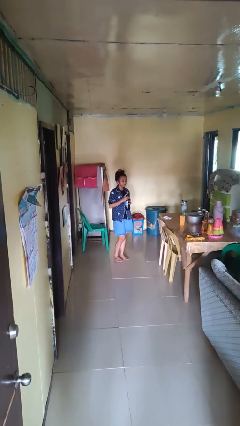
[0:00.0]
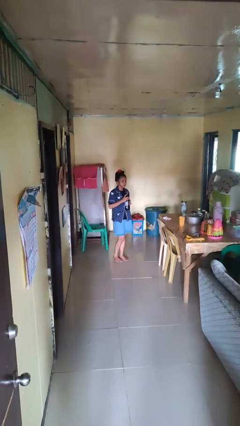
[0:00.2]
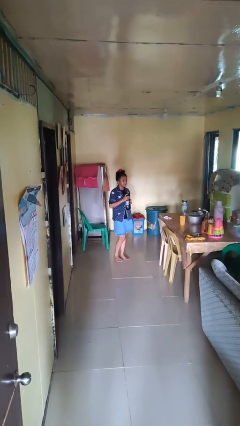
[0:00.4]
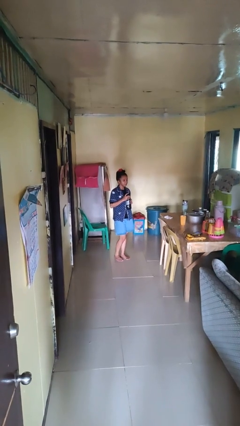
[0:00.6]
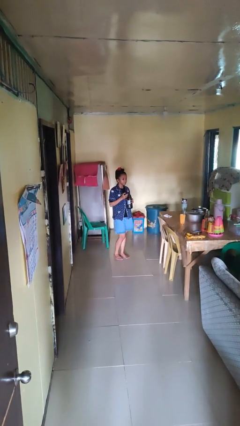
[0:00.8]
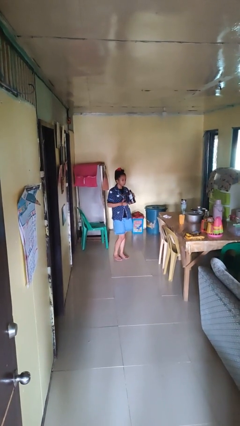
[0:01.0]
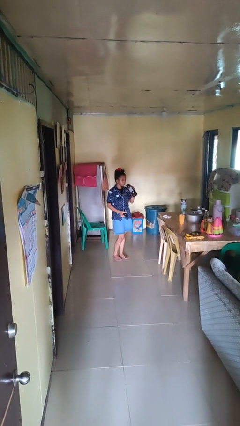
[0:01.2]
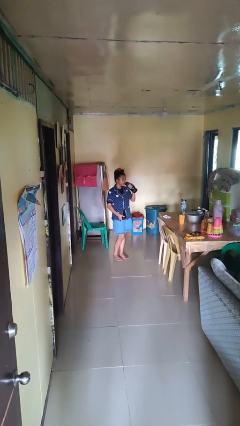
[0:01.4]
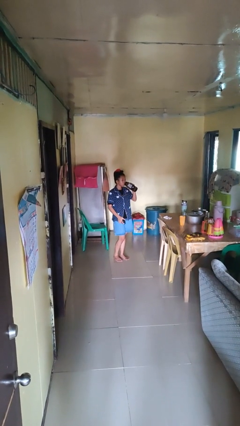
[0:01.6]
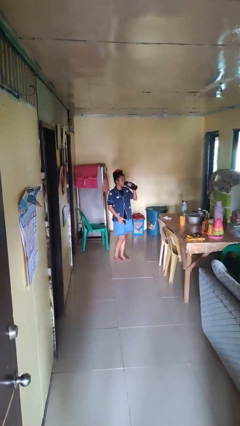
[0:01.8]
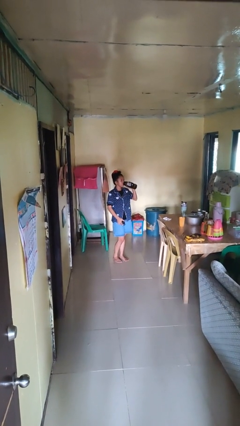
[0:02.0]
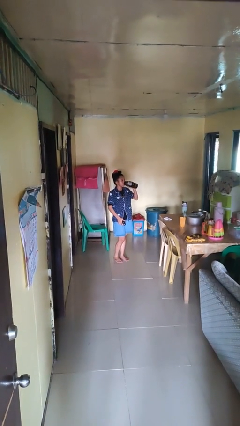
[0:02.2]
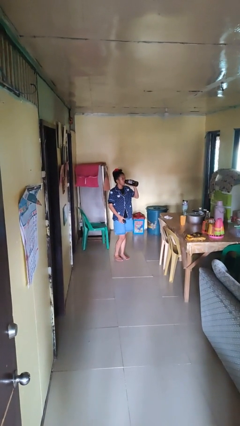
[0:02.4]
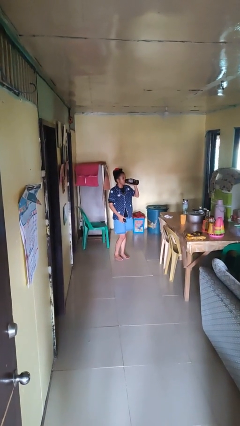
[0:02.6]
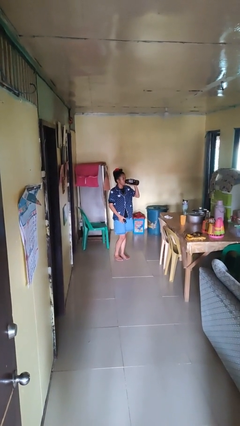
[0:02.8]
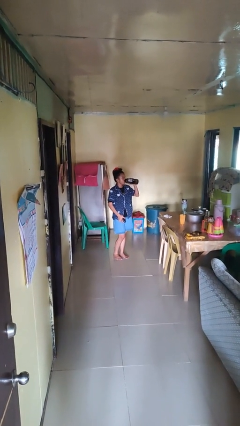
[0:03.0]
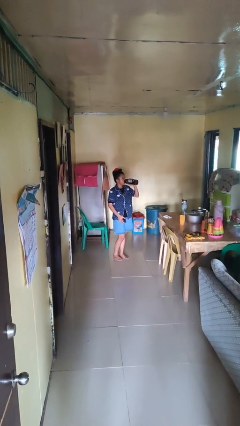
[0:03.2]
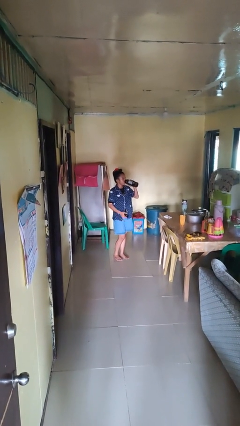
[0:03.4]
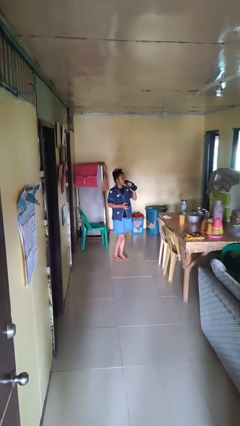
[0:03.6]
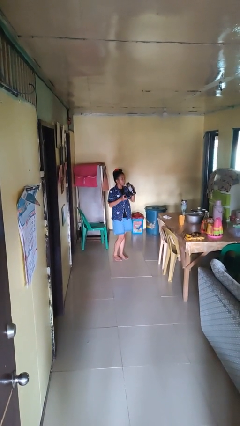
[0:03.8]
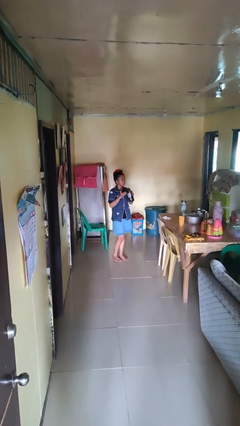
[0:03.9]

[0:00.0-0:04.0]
person drinks from bottle

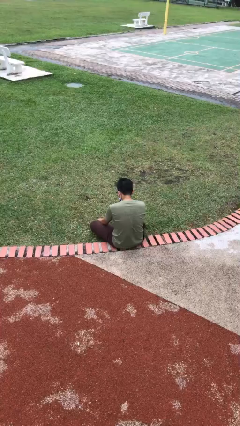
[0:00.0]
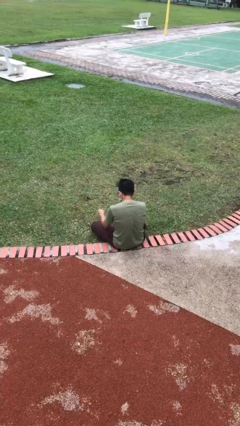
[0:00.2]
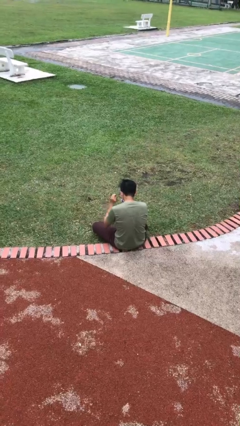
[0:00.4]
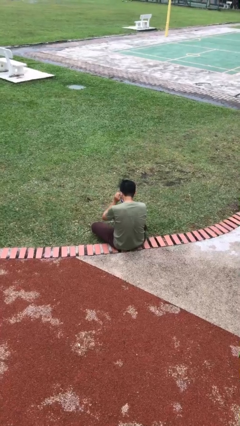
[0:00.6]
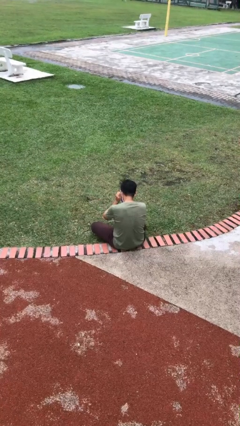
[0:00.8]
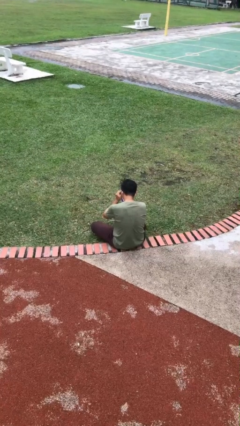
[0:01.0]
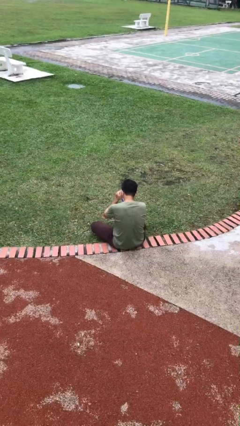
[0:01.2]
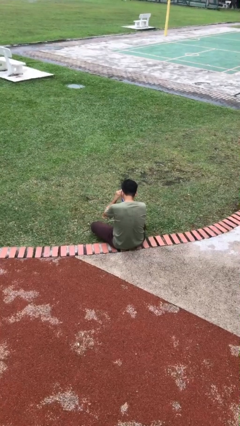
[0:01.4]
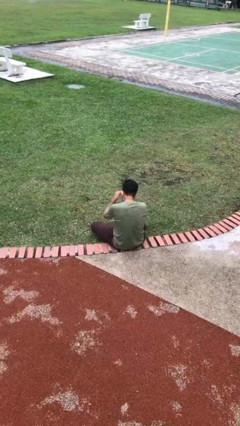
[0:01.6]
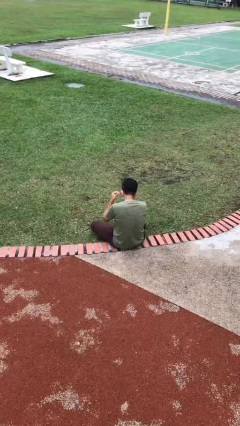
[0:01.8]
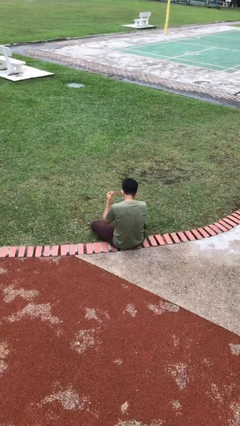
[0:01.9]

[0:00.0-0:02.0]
person touches earlobe

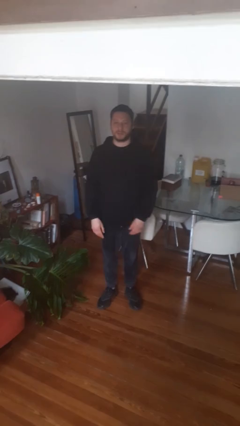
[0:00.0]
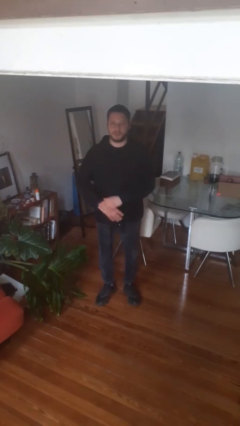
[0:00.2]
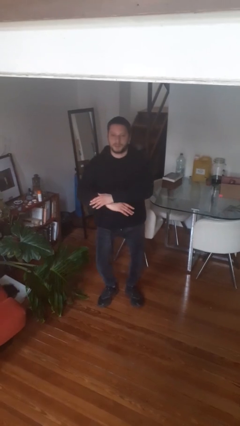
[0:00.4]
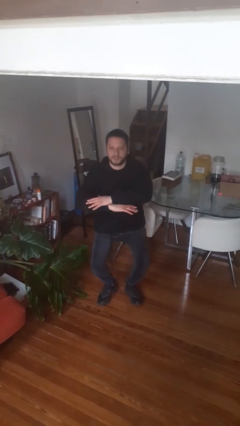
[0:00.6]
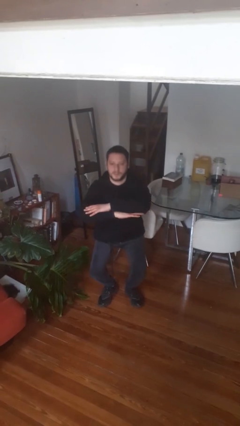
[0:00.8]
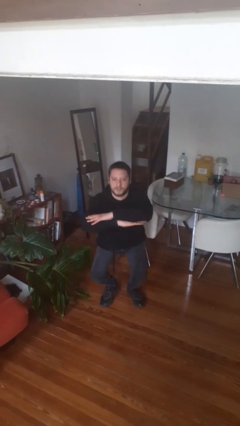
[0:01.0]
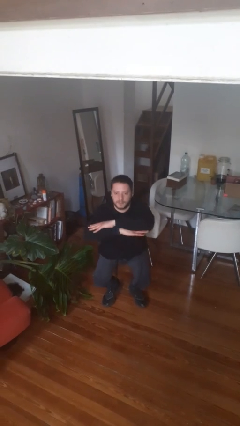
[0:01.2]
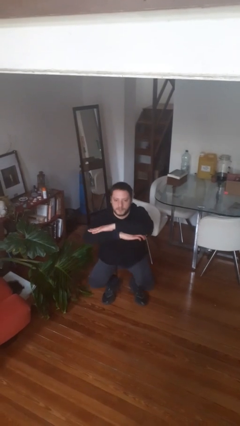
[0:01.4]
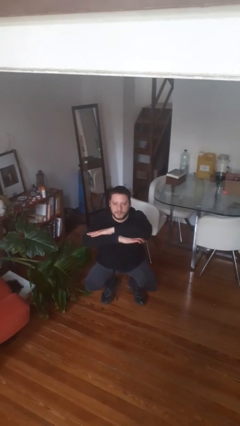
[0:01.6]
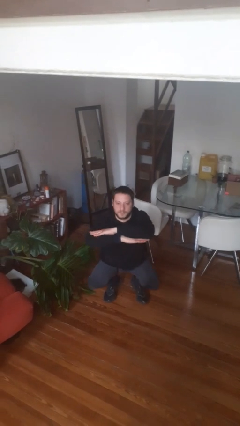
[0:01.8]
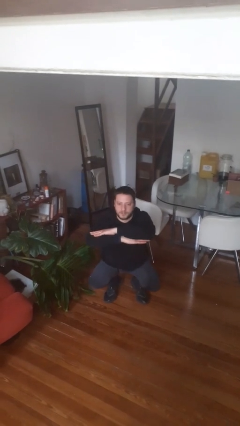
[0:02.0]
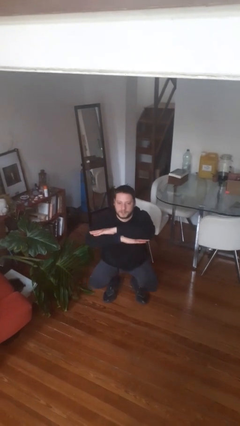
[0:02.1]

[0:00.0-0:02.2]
person squats

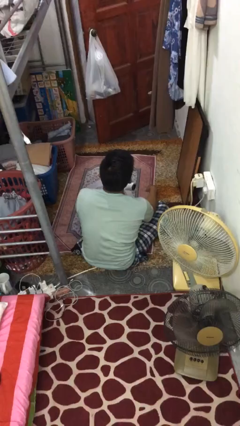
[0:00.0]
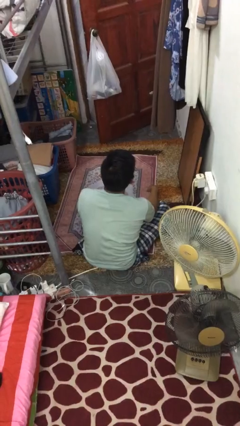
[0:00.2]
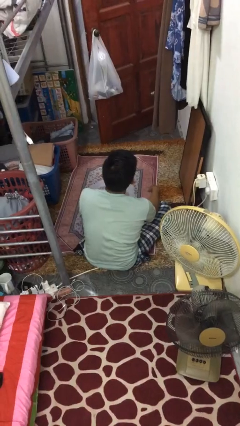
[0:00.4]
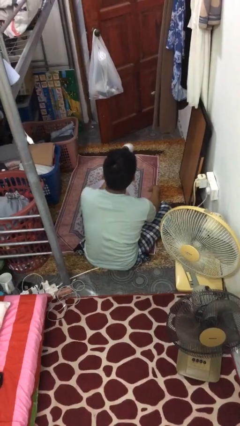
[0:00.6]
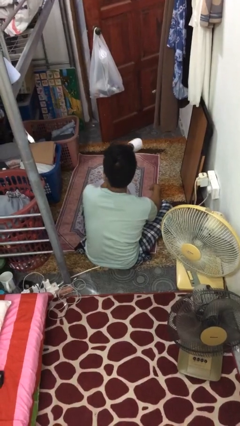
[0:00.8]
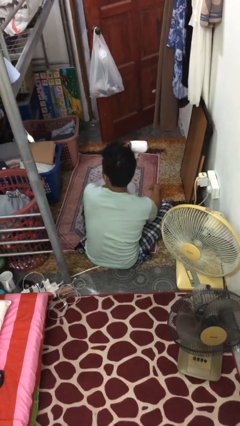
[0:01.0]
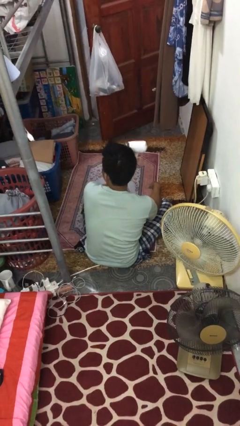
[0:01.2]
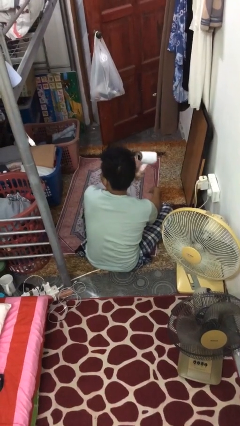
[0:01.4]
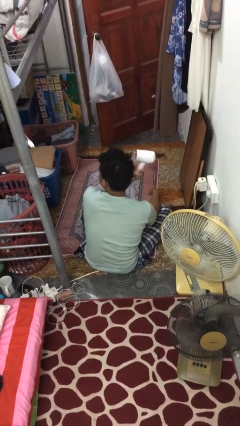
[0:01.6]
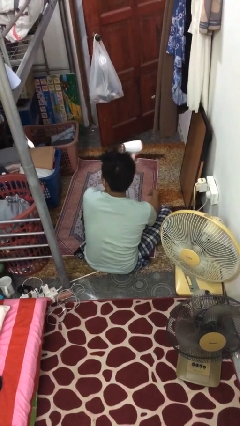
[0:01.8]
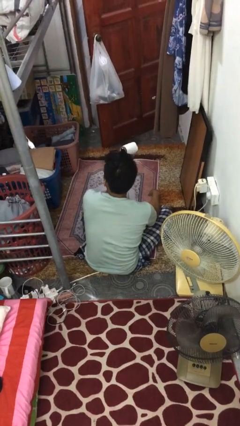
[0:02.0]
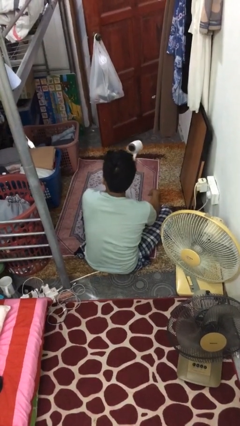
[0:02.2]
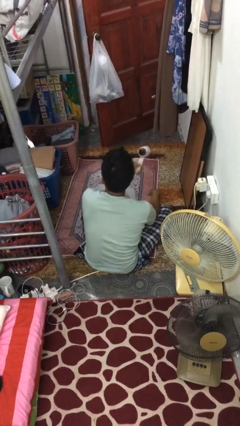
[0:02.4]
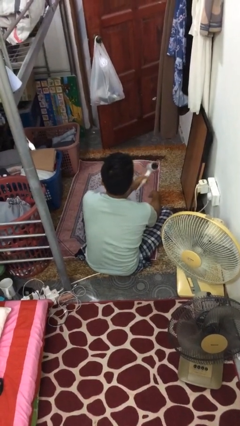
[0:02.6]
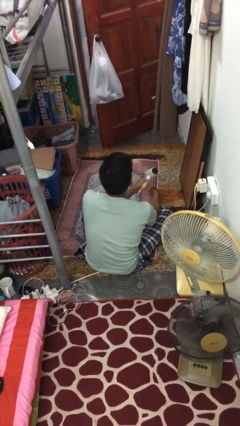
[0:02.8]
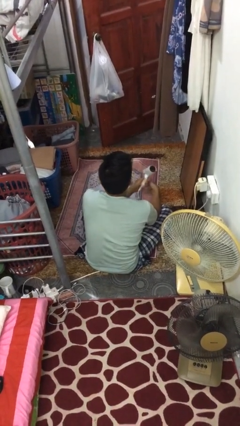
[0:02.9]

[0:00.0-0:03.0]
person dries hair with hairdryer

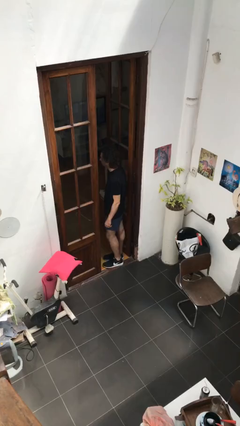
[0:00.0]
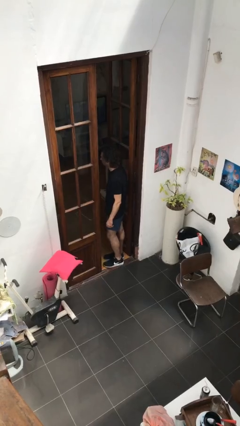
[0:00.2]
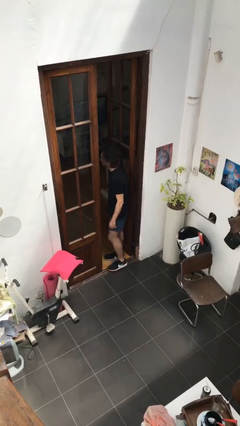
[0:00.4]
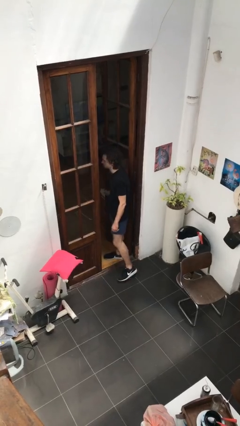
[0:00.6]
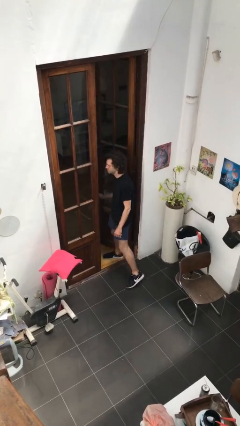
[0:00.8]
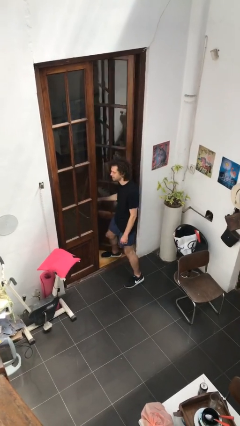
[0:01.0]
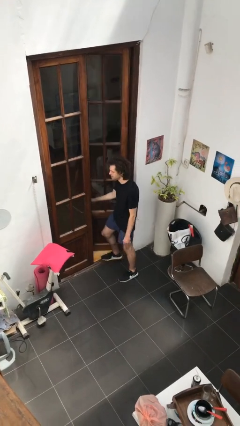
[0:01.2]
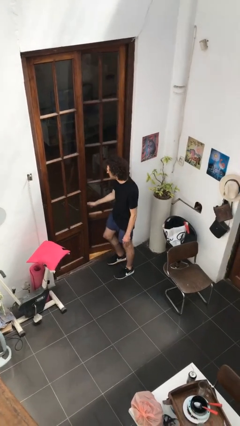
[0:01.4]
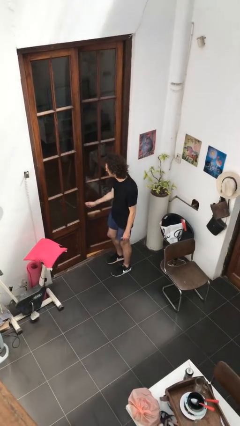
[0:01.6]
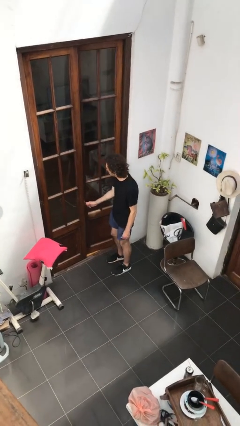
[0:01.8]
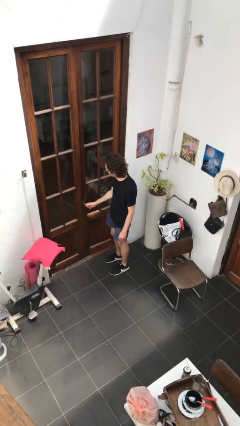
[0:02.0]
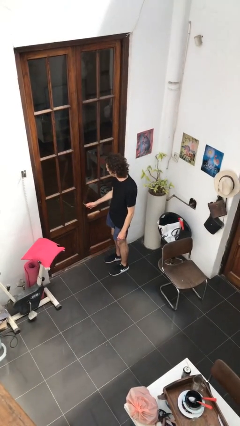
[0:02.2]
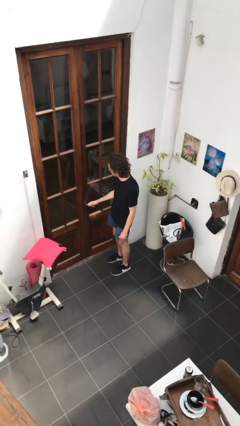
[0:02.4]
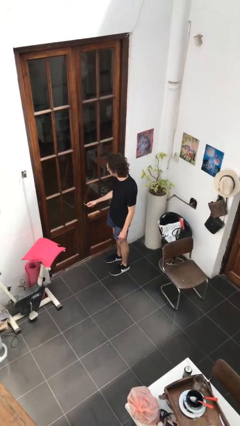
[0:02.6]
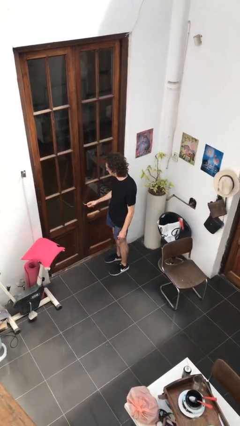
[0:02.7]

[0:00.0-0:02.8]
person closes facility door

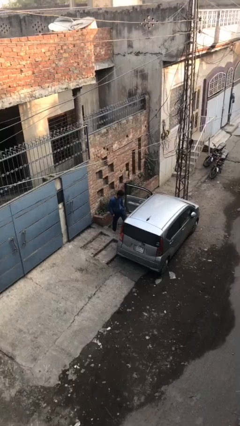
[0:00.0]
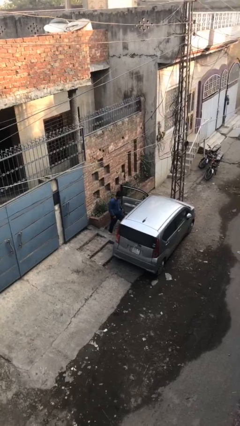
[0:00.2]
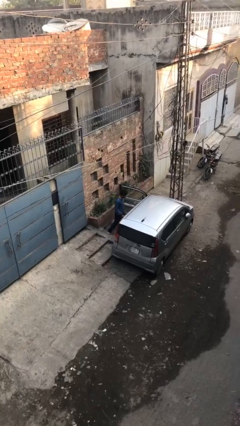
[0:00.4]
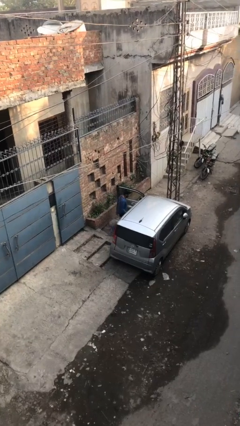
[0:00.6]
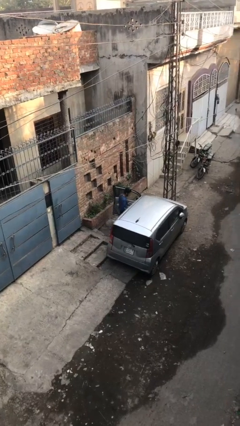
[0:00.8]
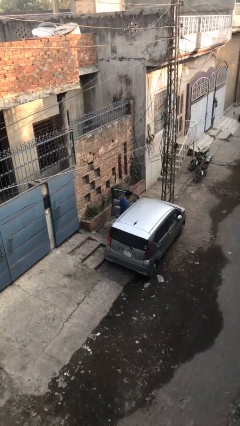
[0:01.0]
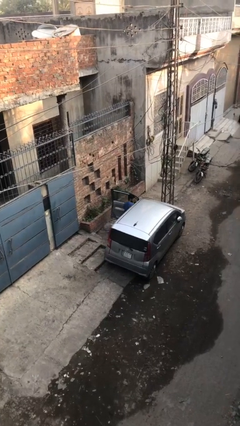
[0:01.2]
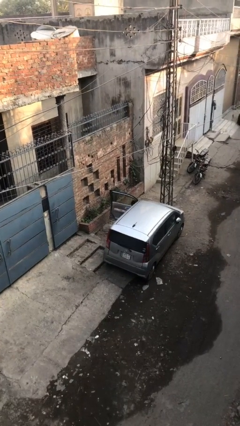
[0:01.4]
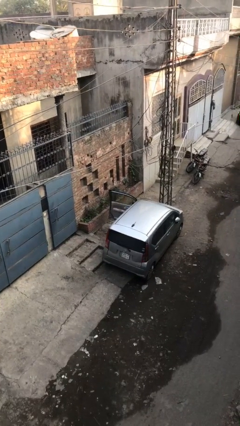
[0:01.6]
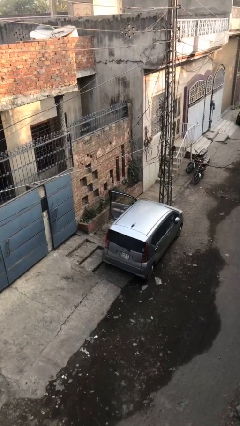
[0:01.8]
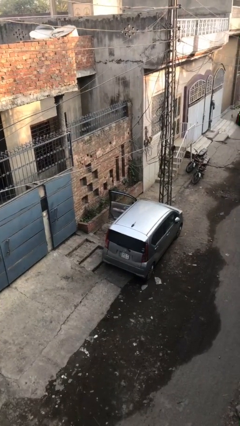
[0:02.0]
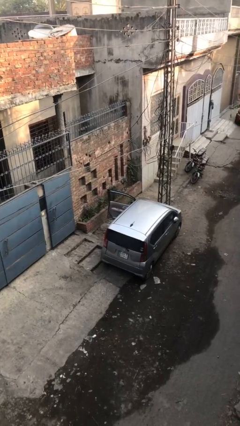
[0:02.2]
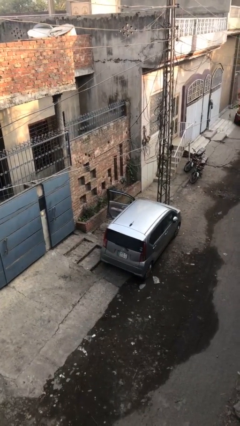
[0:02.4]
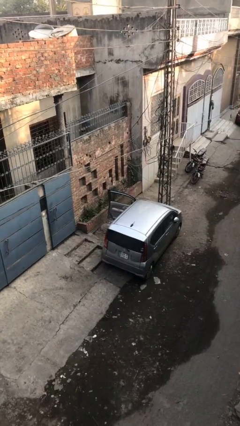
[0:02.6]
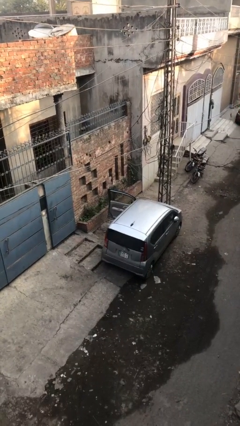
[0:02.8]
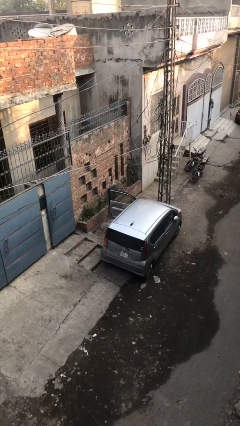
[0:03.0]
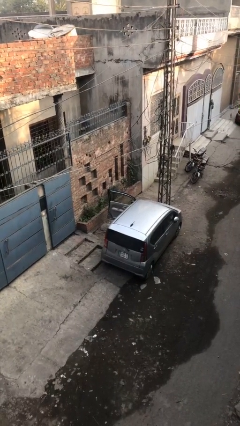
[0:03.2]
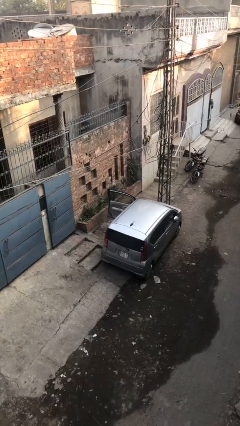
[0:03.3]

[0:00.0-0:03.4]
person enters car
